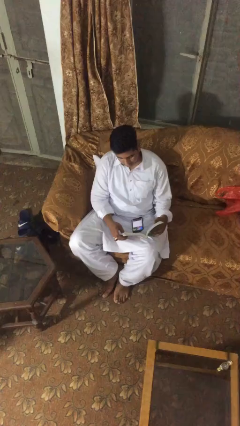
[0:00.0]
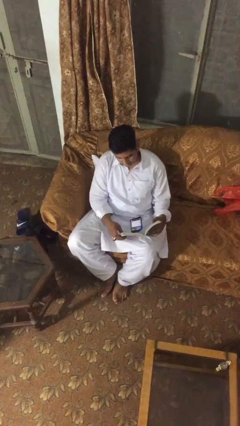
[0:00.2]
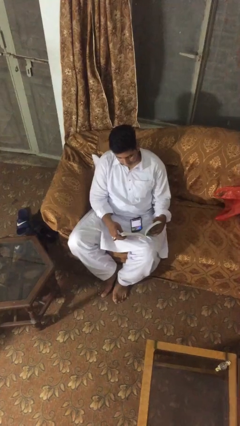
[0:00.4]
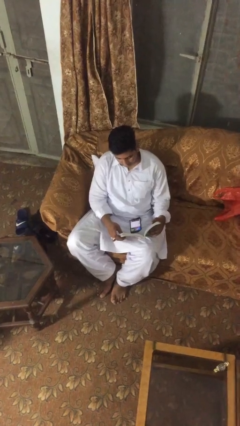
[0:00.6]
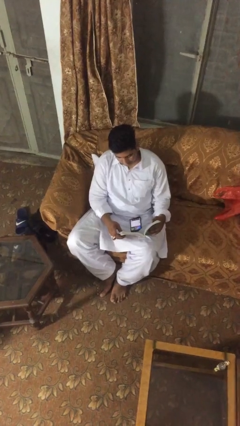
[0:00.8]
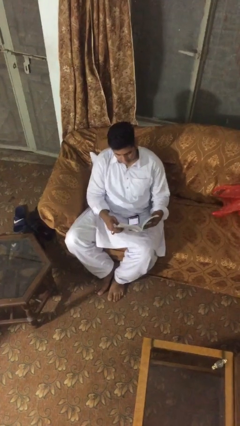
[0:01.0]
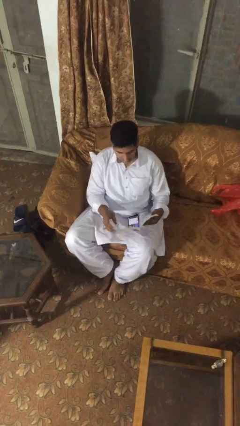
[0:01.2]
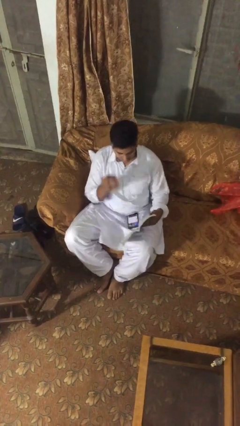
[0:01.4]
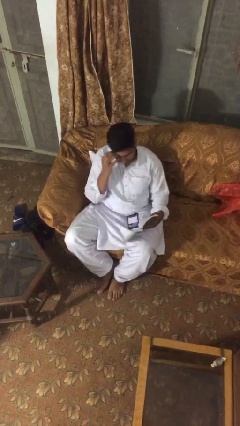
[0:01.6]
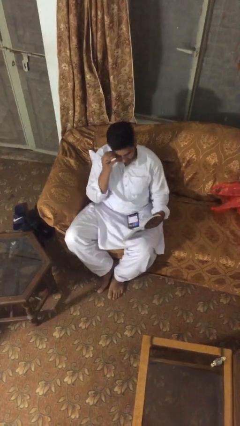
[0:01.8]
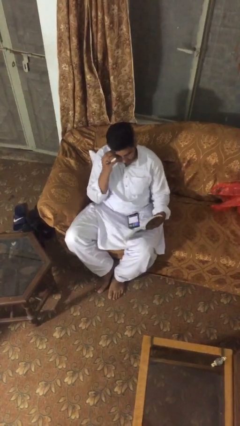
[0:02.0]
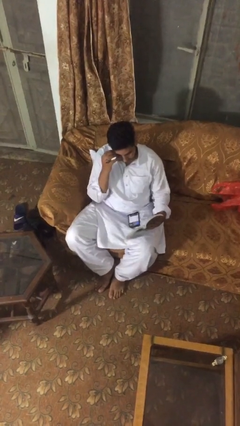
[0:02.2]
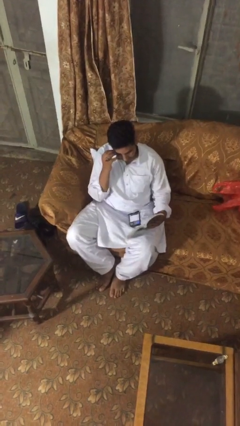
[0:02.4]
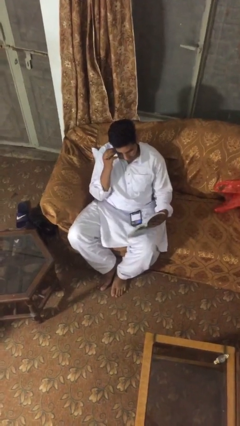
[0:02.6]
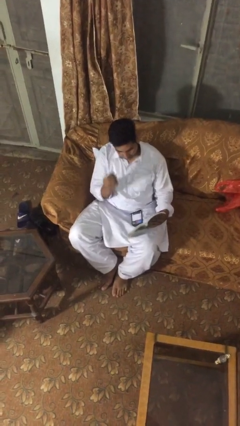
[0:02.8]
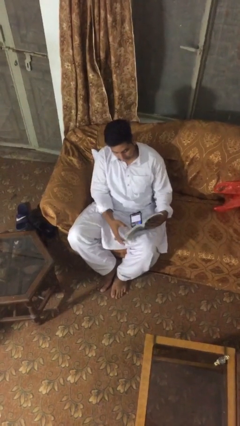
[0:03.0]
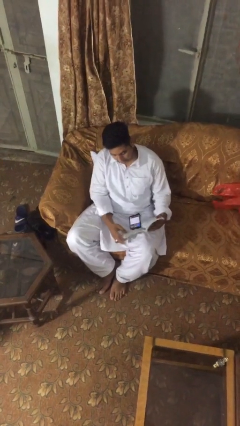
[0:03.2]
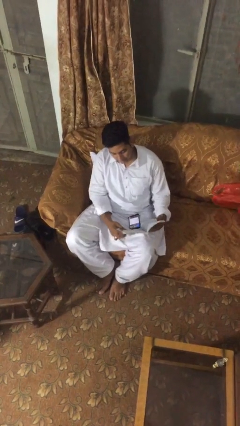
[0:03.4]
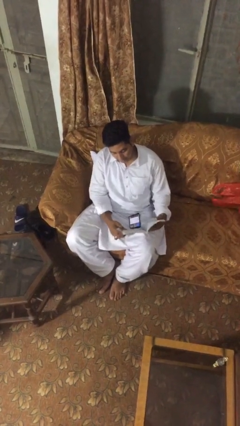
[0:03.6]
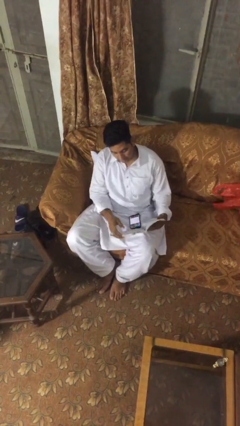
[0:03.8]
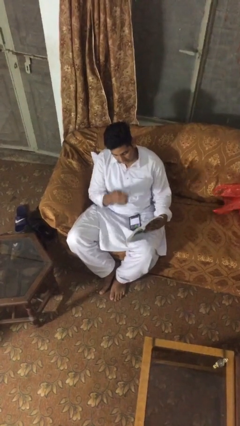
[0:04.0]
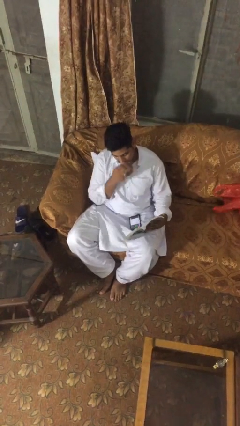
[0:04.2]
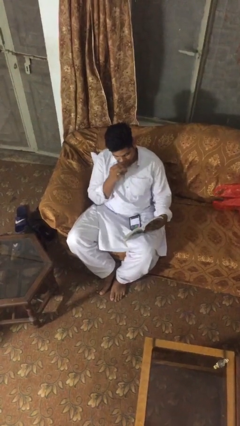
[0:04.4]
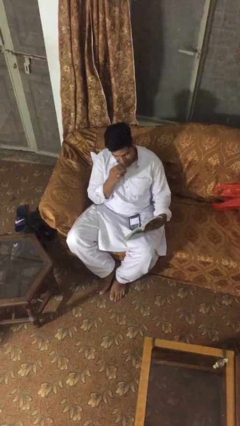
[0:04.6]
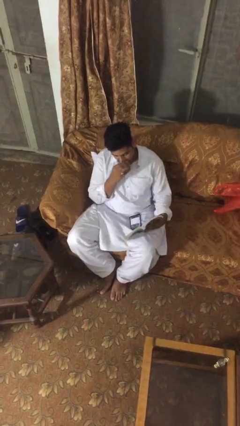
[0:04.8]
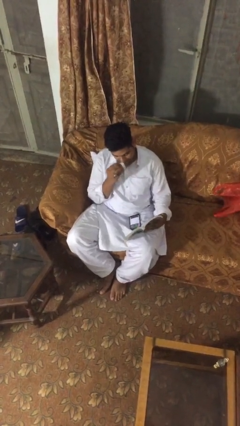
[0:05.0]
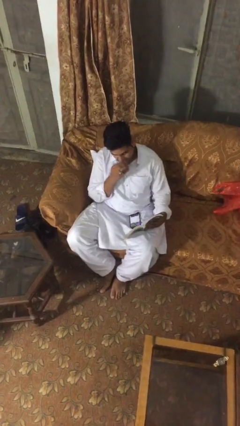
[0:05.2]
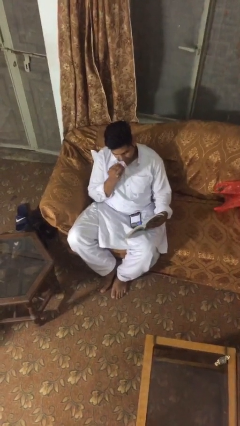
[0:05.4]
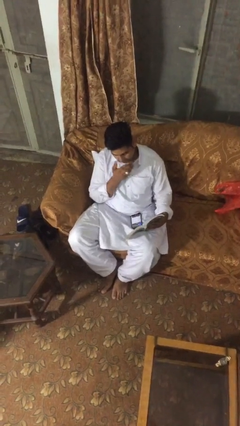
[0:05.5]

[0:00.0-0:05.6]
person reads document

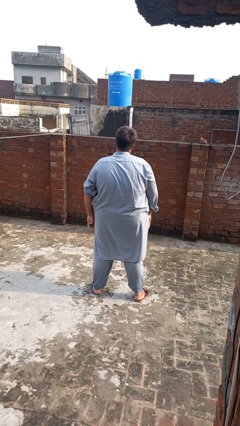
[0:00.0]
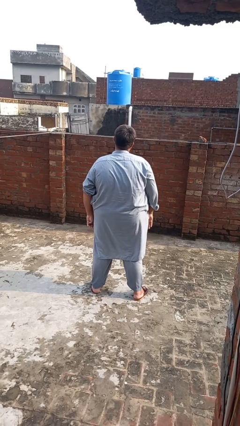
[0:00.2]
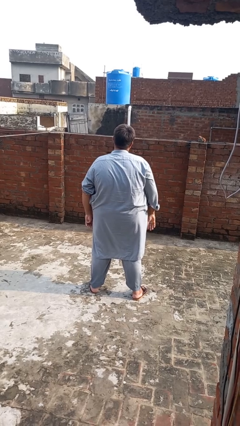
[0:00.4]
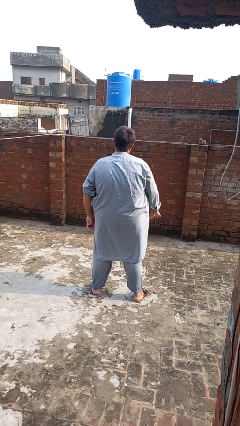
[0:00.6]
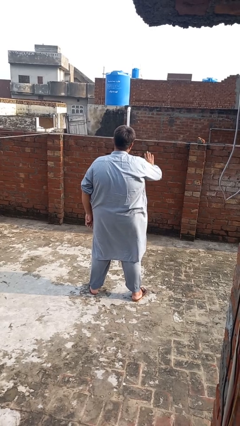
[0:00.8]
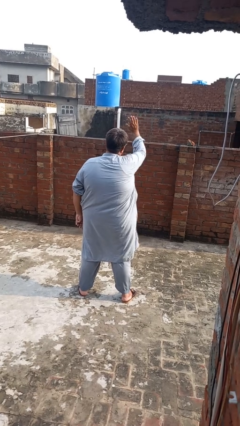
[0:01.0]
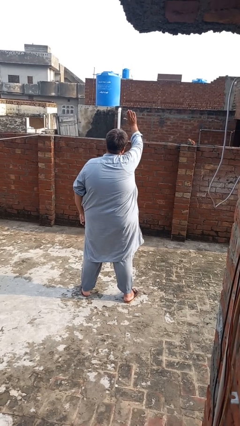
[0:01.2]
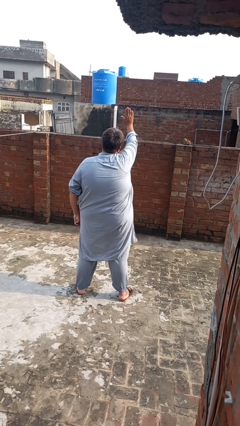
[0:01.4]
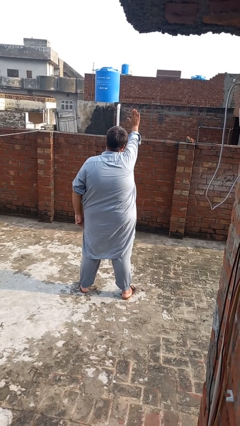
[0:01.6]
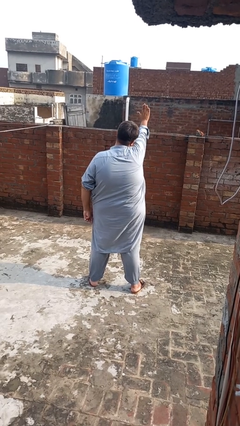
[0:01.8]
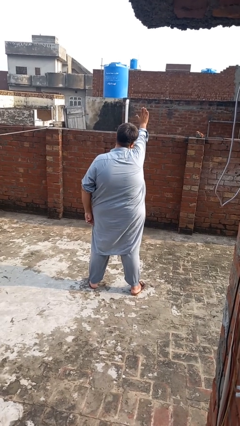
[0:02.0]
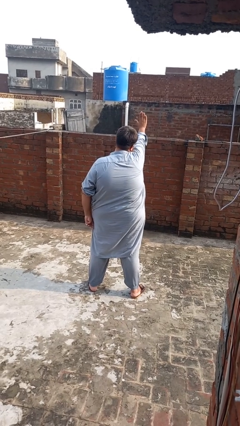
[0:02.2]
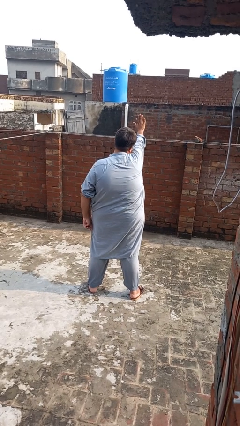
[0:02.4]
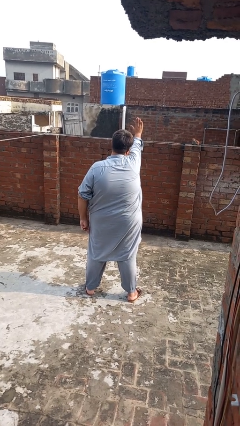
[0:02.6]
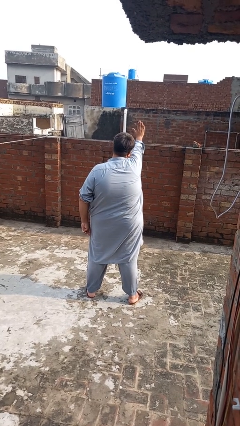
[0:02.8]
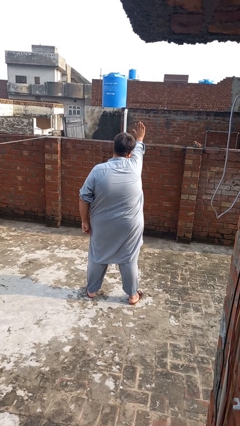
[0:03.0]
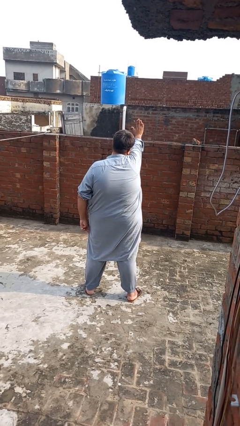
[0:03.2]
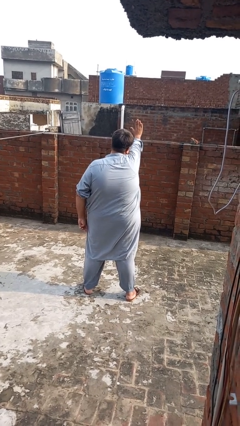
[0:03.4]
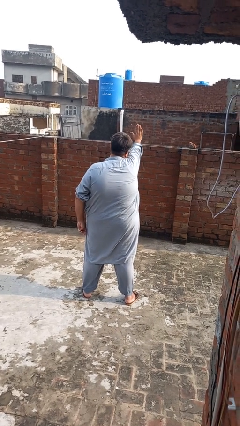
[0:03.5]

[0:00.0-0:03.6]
person gestures stop

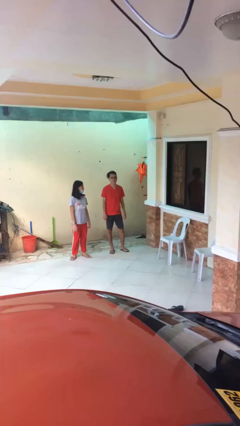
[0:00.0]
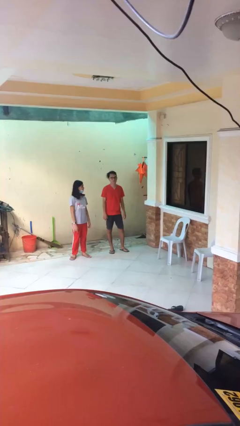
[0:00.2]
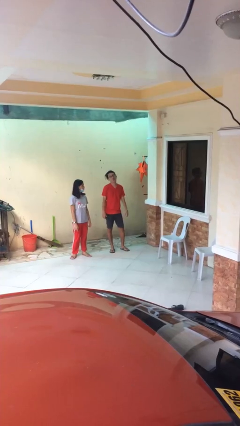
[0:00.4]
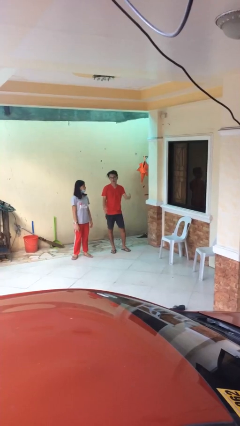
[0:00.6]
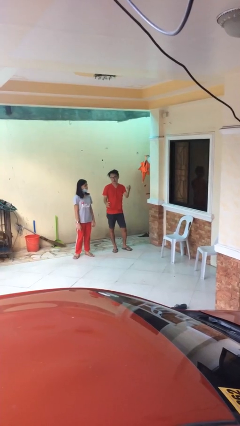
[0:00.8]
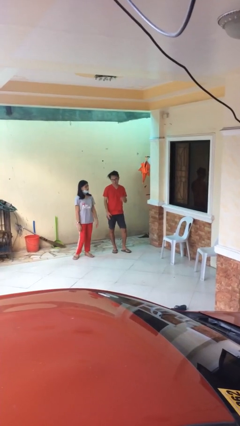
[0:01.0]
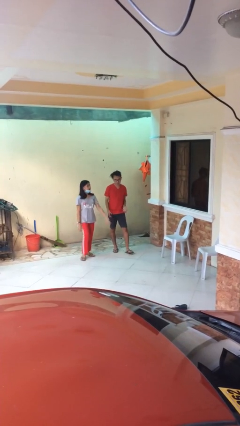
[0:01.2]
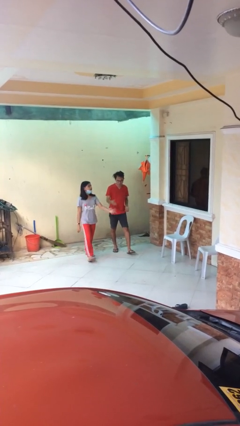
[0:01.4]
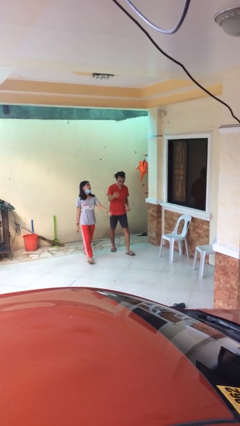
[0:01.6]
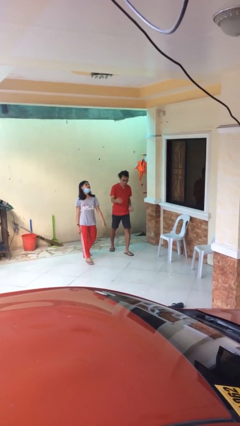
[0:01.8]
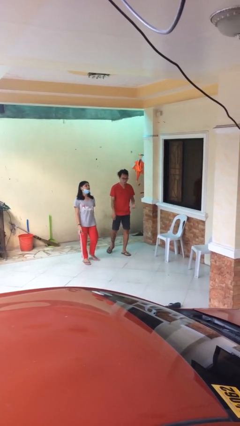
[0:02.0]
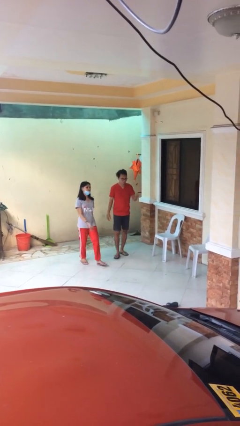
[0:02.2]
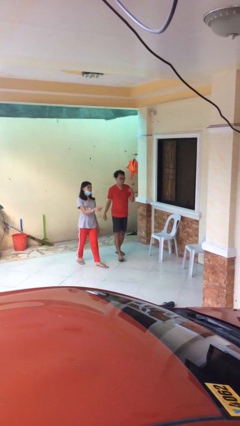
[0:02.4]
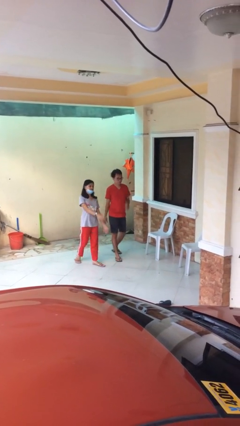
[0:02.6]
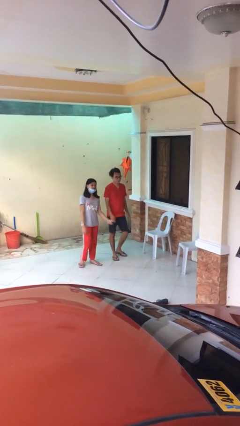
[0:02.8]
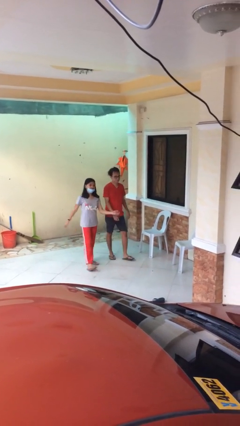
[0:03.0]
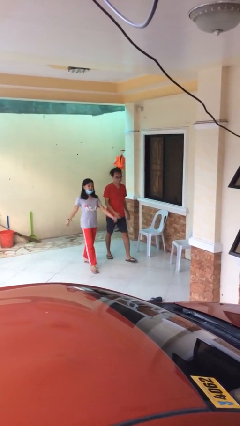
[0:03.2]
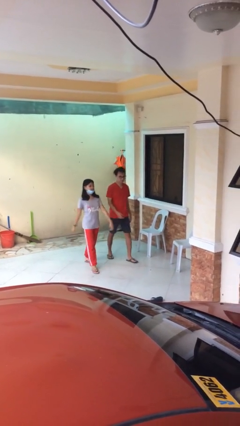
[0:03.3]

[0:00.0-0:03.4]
person talks to person

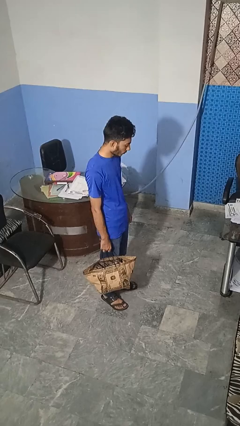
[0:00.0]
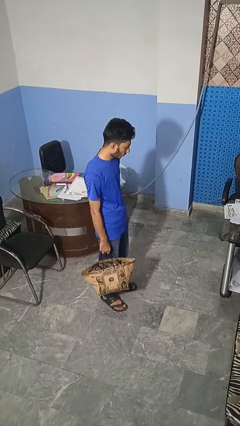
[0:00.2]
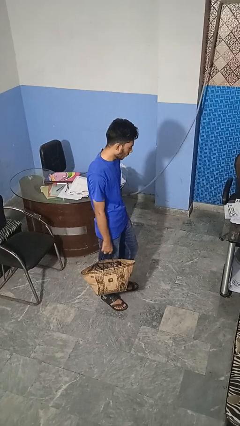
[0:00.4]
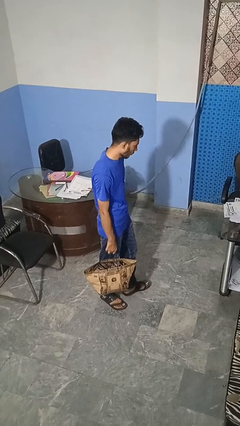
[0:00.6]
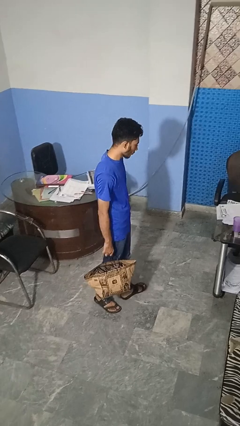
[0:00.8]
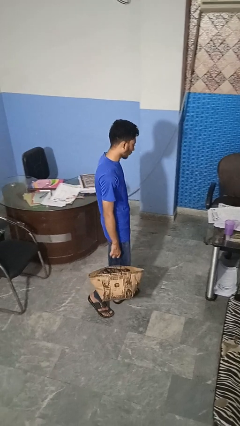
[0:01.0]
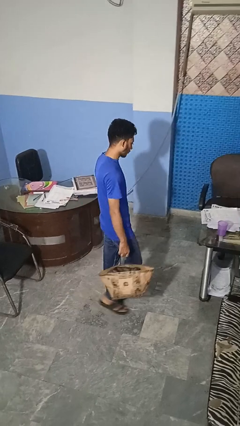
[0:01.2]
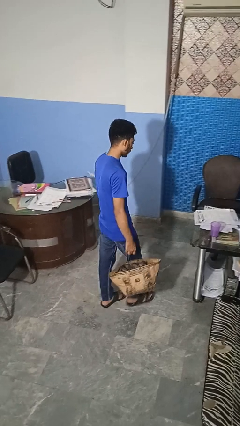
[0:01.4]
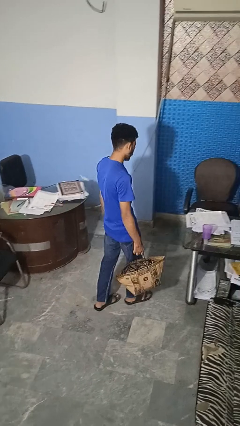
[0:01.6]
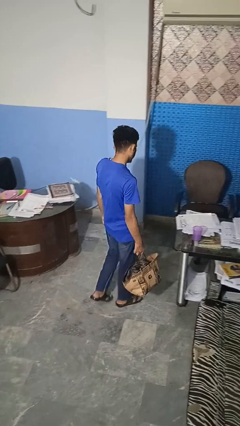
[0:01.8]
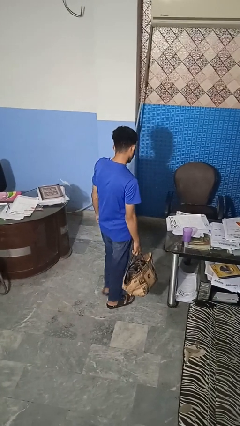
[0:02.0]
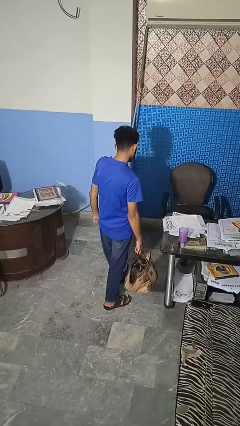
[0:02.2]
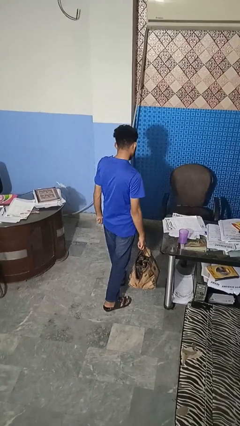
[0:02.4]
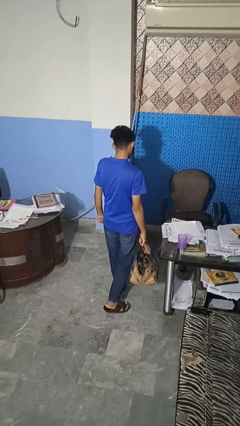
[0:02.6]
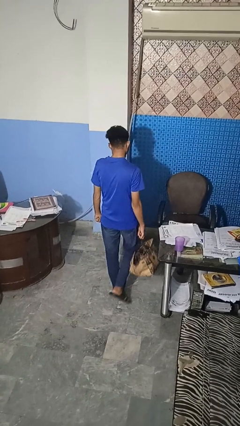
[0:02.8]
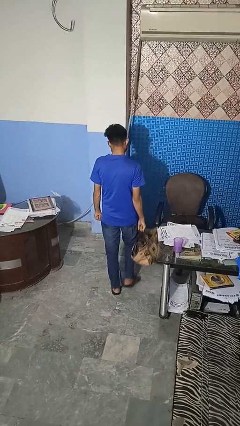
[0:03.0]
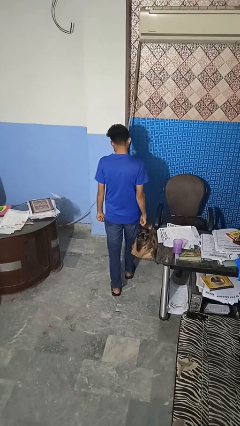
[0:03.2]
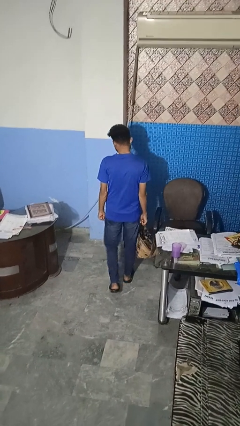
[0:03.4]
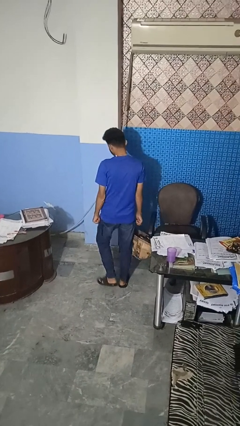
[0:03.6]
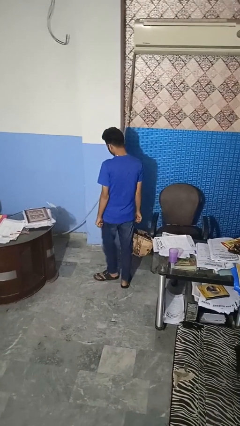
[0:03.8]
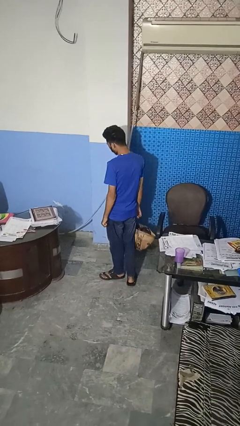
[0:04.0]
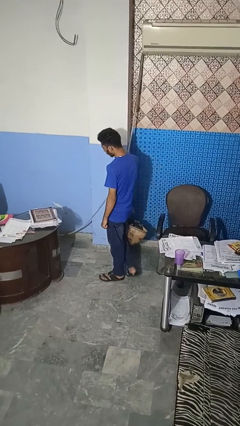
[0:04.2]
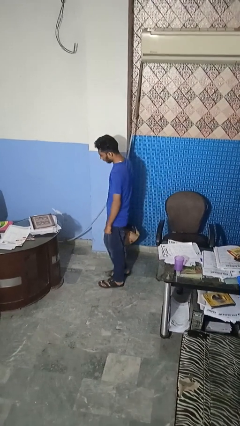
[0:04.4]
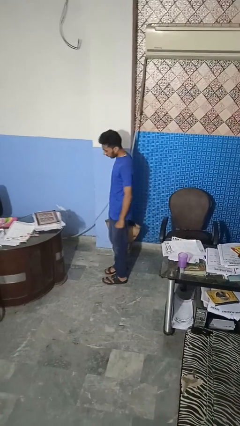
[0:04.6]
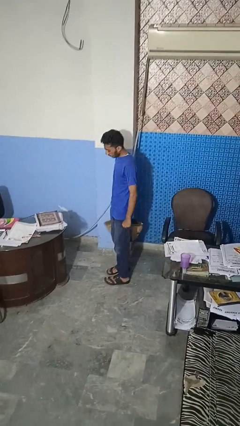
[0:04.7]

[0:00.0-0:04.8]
person carries groceries

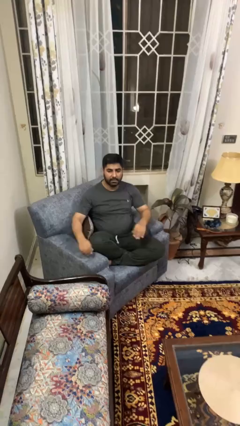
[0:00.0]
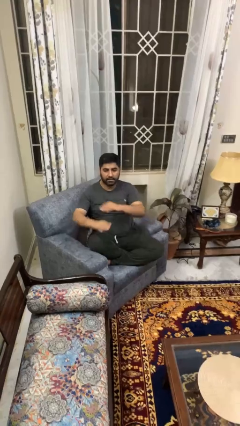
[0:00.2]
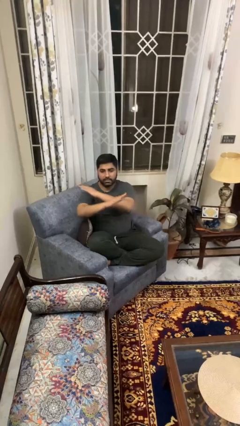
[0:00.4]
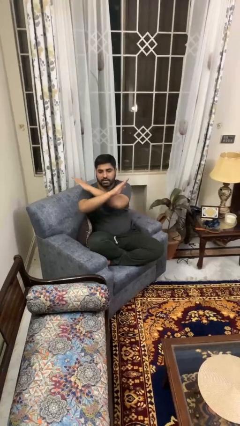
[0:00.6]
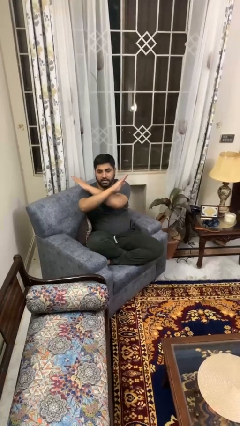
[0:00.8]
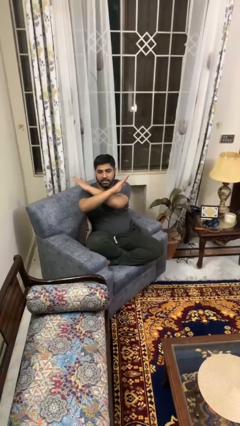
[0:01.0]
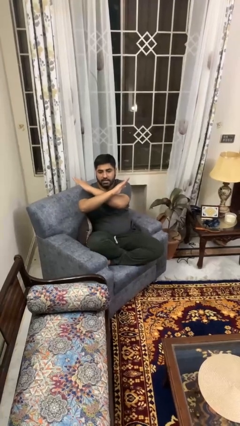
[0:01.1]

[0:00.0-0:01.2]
person gestures arms x
